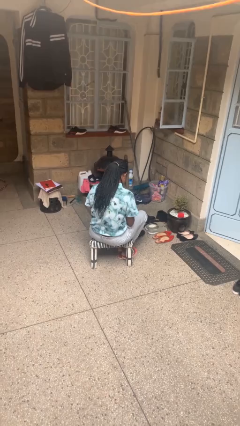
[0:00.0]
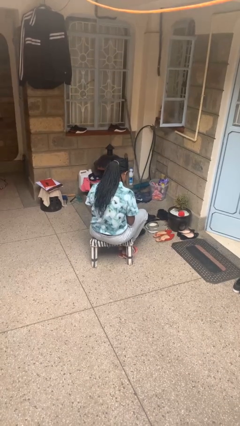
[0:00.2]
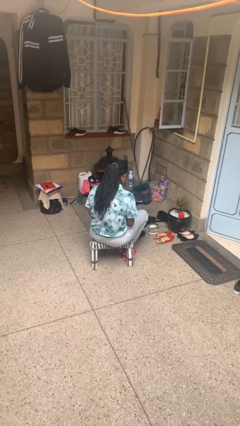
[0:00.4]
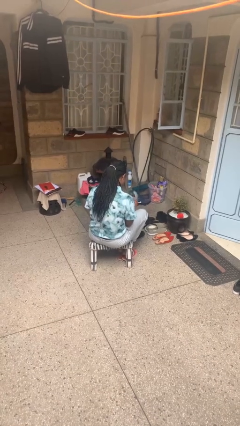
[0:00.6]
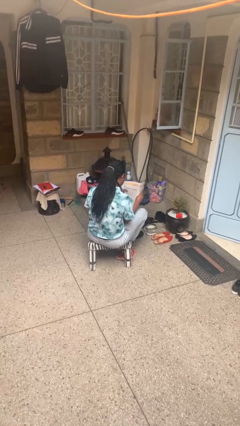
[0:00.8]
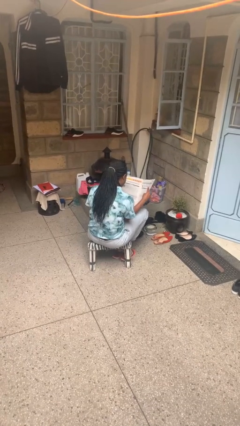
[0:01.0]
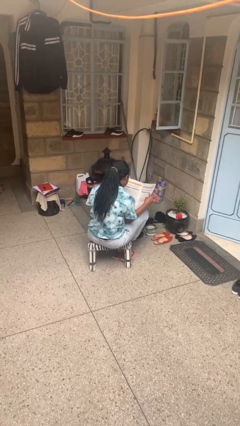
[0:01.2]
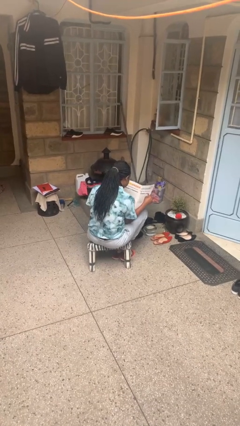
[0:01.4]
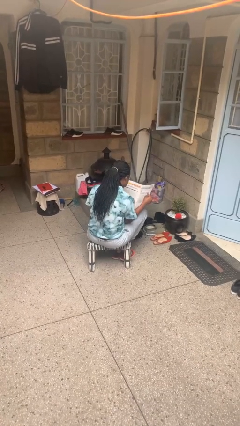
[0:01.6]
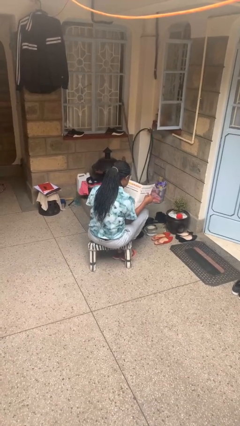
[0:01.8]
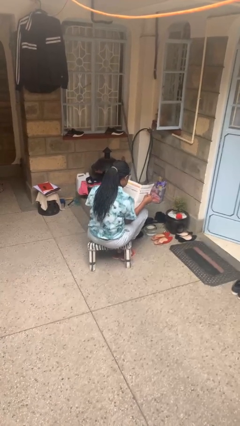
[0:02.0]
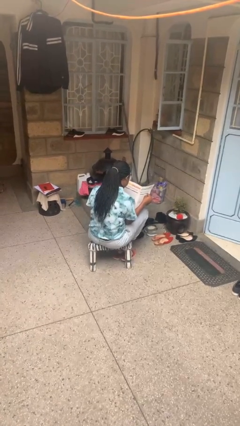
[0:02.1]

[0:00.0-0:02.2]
person reads newspaper

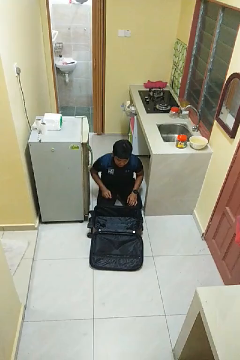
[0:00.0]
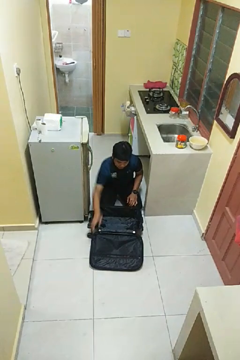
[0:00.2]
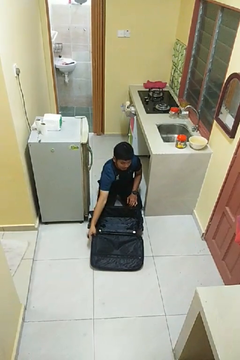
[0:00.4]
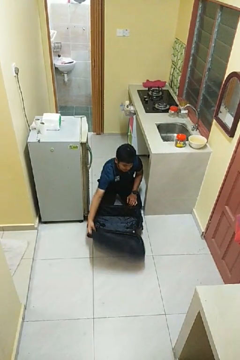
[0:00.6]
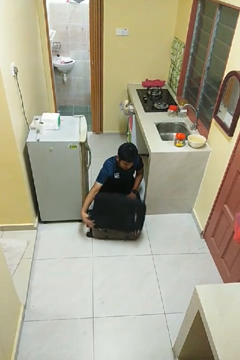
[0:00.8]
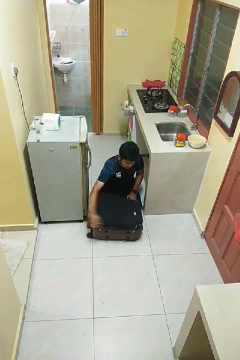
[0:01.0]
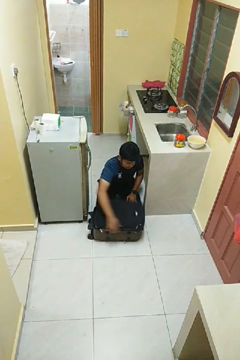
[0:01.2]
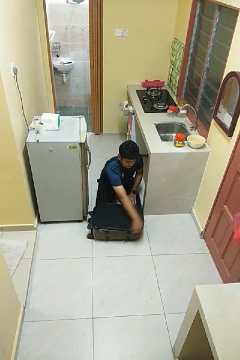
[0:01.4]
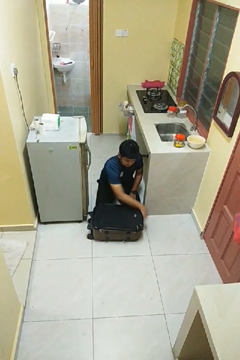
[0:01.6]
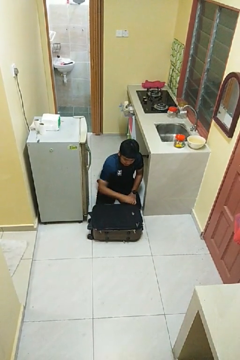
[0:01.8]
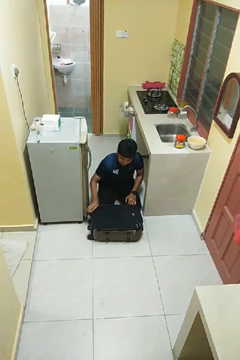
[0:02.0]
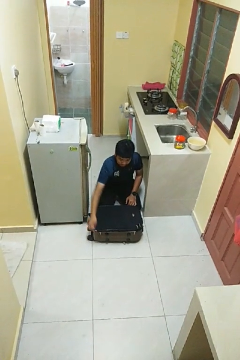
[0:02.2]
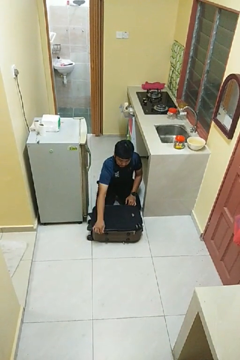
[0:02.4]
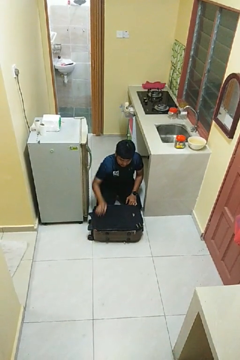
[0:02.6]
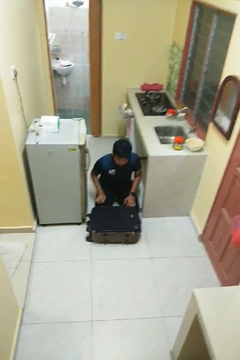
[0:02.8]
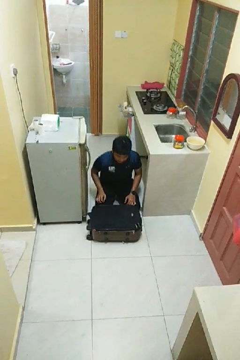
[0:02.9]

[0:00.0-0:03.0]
person closes suitcase

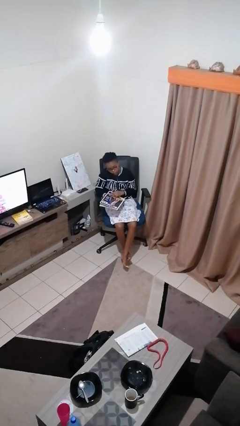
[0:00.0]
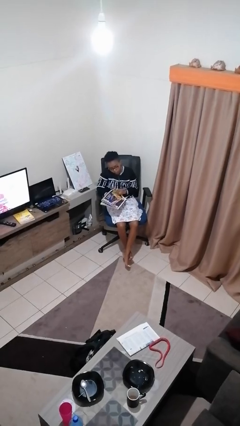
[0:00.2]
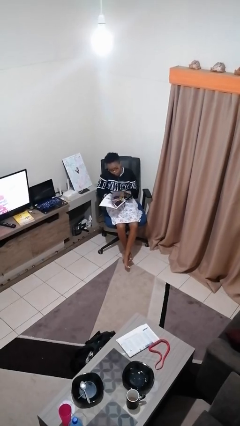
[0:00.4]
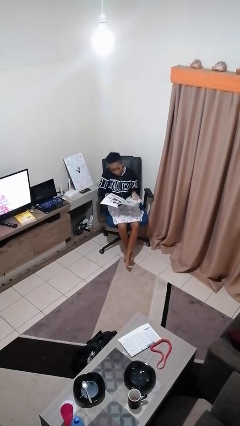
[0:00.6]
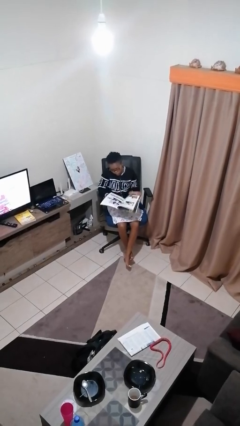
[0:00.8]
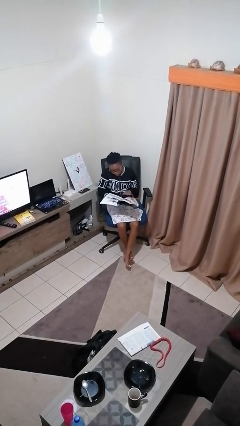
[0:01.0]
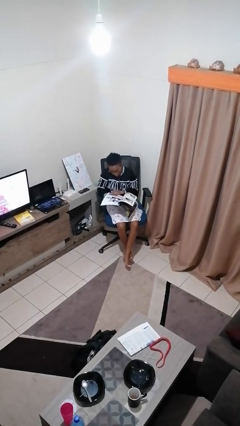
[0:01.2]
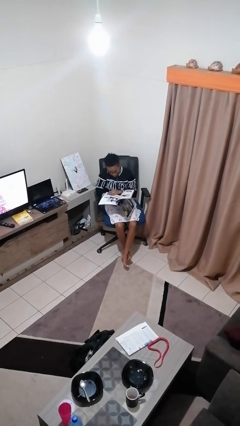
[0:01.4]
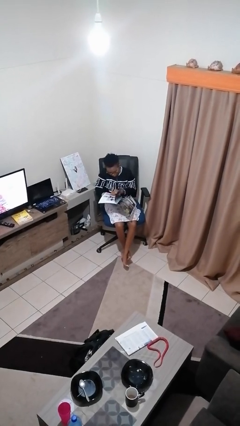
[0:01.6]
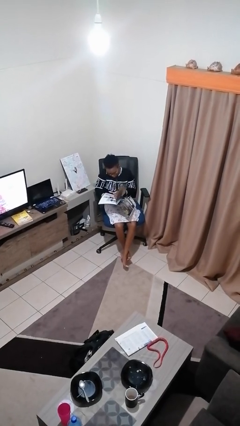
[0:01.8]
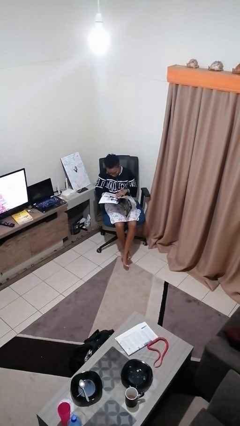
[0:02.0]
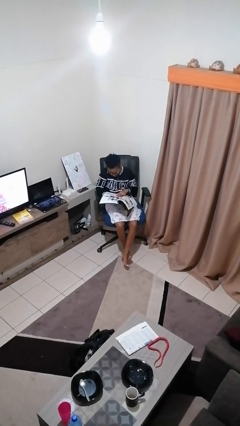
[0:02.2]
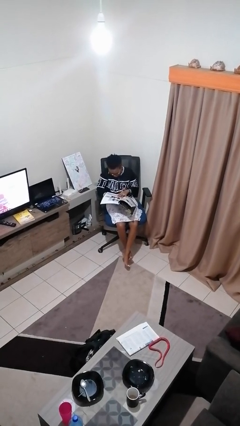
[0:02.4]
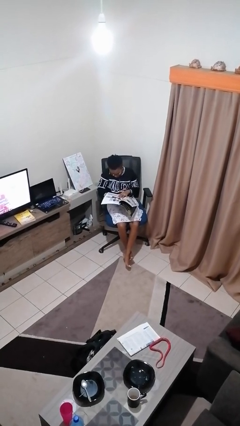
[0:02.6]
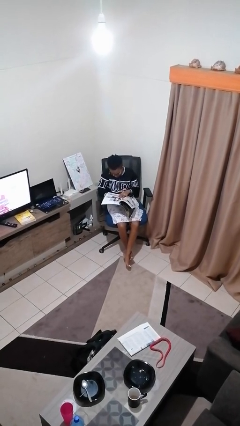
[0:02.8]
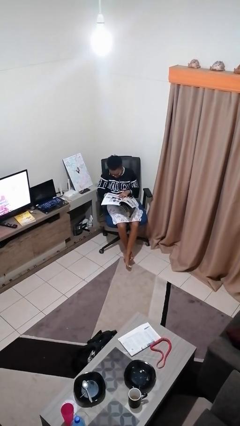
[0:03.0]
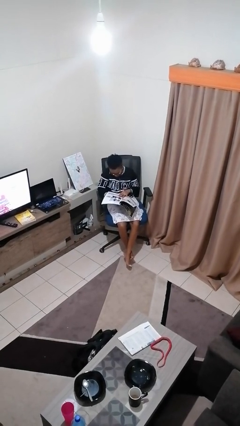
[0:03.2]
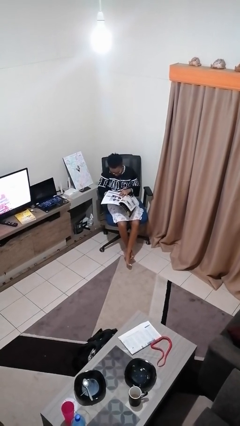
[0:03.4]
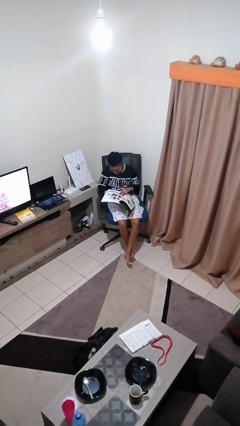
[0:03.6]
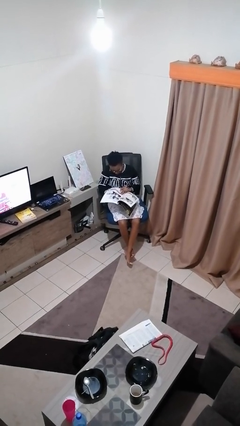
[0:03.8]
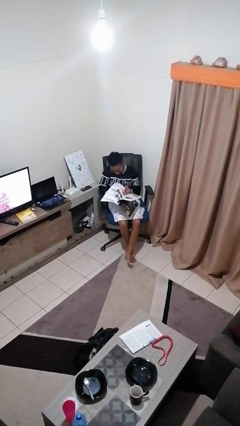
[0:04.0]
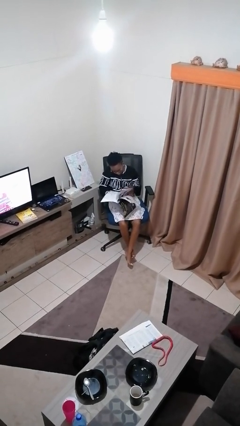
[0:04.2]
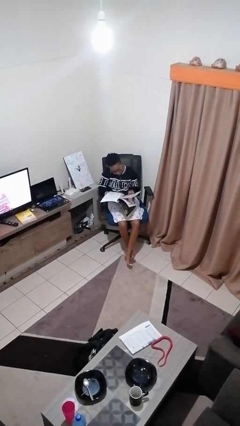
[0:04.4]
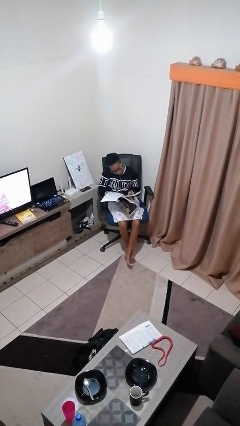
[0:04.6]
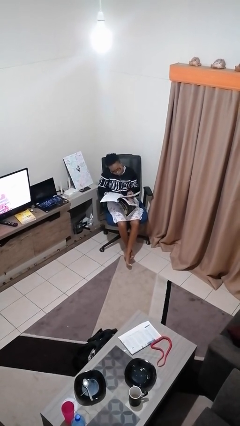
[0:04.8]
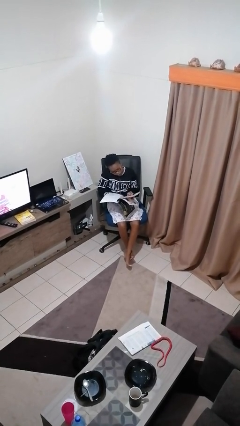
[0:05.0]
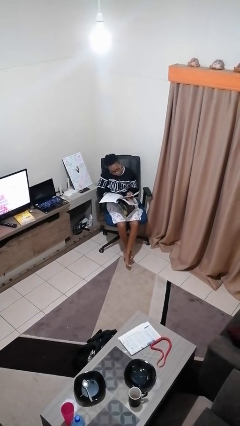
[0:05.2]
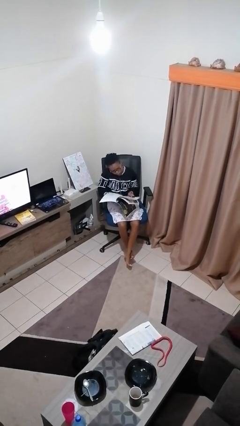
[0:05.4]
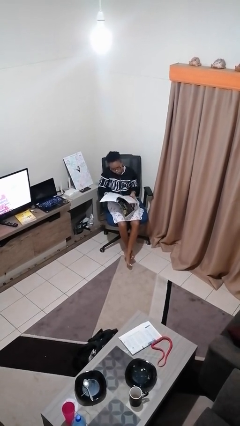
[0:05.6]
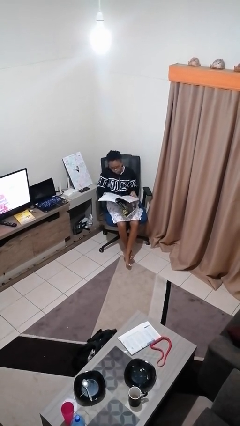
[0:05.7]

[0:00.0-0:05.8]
person reads magazine

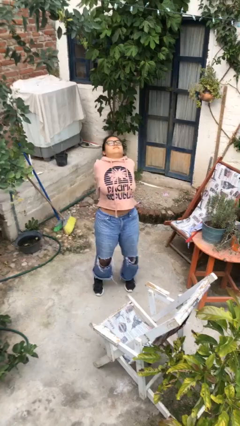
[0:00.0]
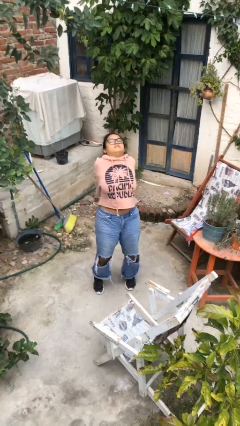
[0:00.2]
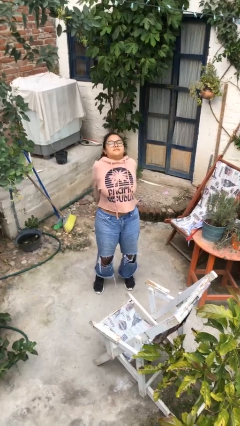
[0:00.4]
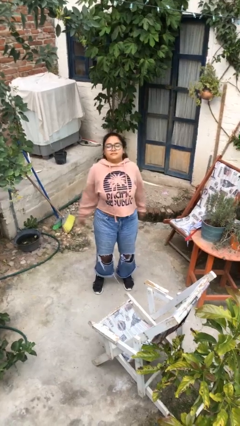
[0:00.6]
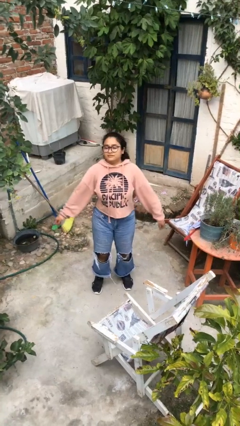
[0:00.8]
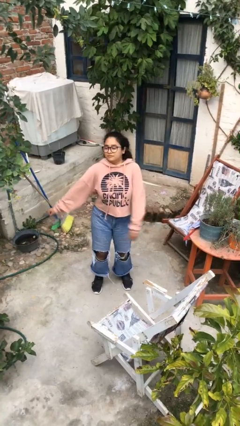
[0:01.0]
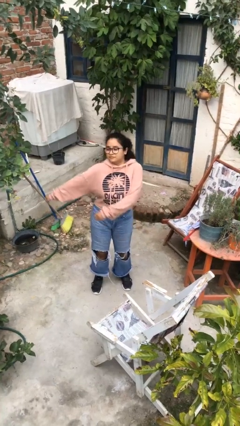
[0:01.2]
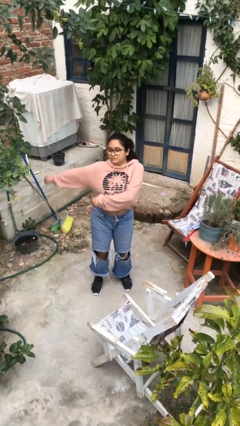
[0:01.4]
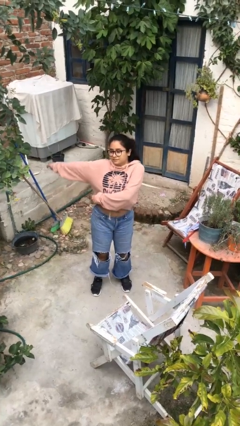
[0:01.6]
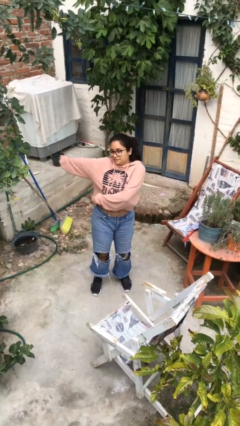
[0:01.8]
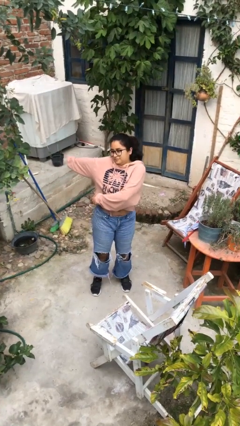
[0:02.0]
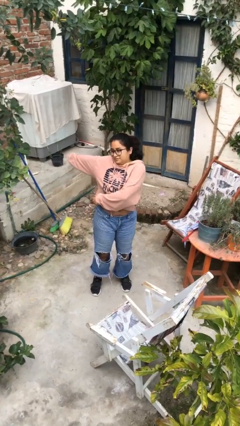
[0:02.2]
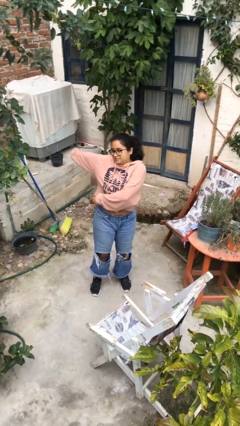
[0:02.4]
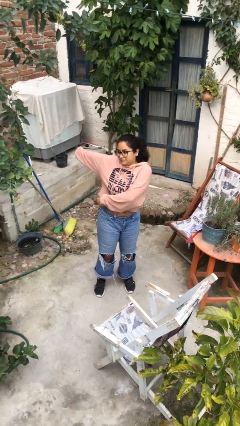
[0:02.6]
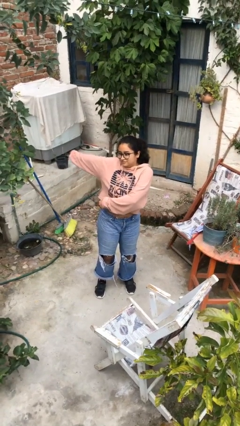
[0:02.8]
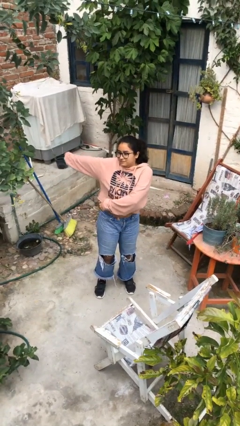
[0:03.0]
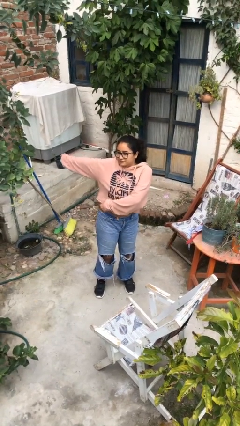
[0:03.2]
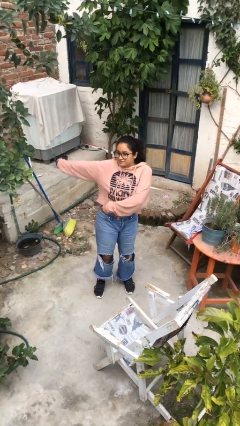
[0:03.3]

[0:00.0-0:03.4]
person stretches arms to side

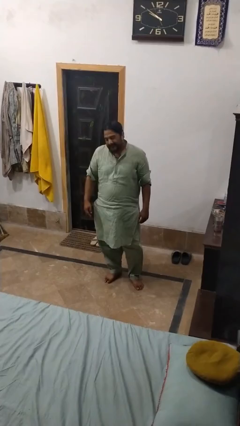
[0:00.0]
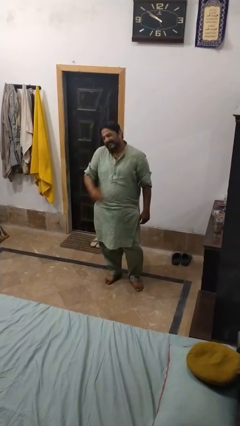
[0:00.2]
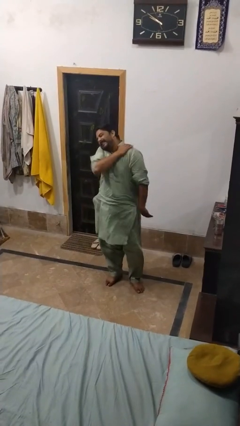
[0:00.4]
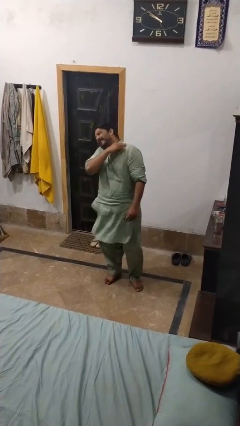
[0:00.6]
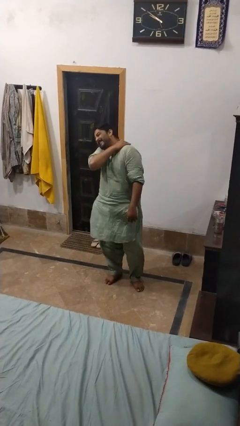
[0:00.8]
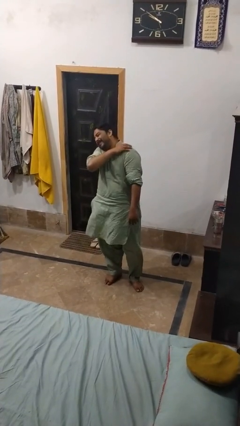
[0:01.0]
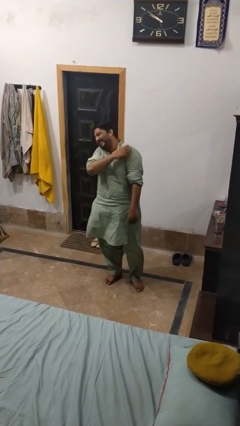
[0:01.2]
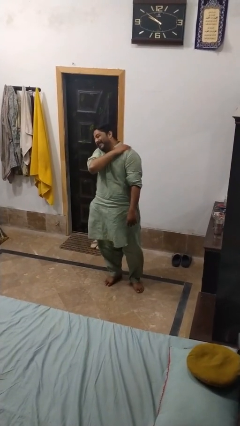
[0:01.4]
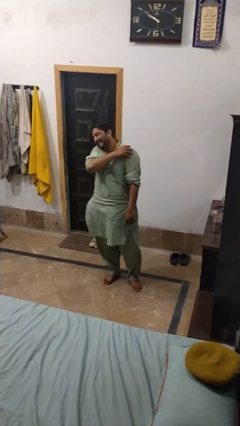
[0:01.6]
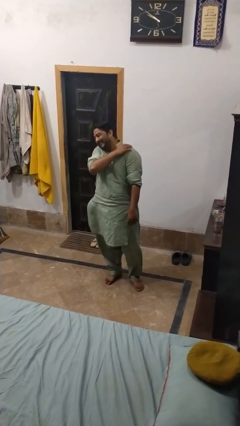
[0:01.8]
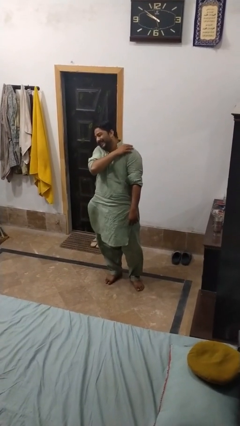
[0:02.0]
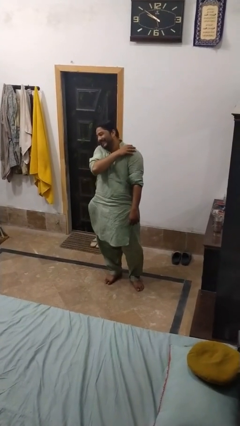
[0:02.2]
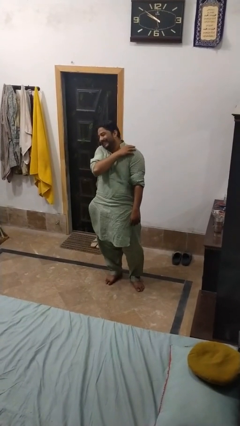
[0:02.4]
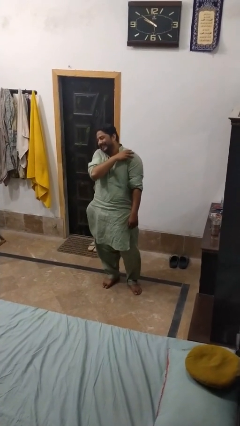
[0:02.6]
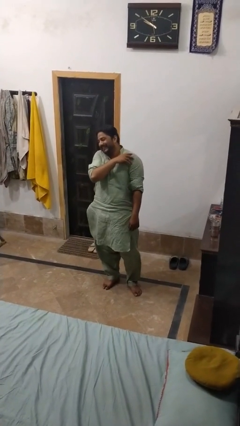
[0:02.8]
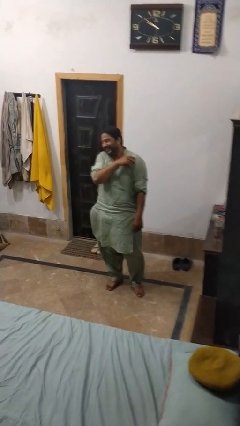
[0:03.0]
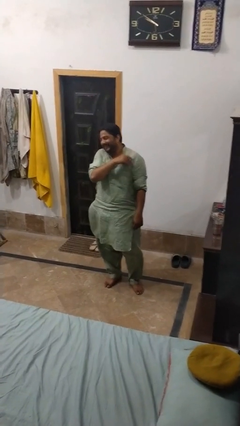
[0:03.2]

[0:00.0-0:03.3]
person swats bug

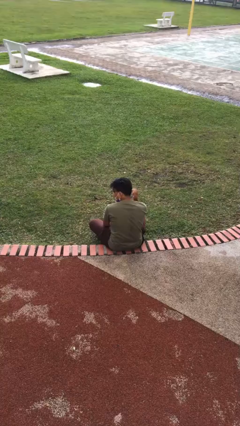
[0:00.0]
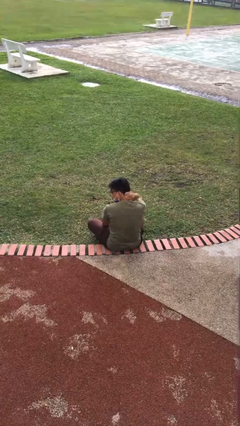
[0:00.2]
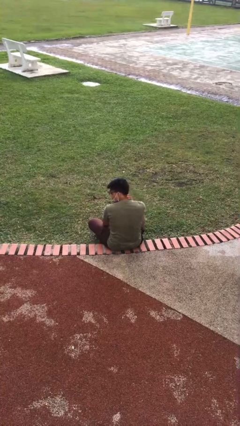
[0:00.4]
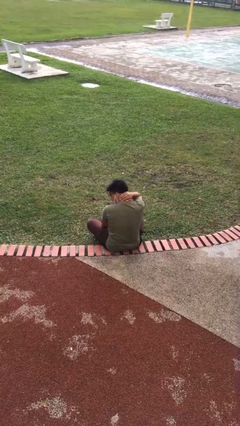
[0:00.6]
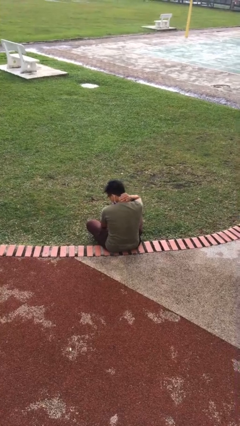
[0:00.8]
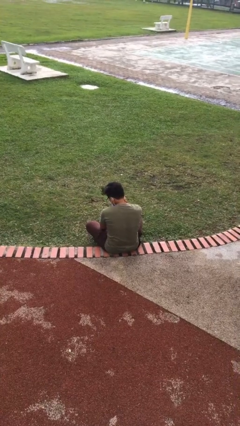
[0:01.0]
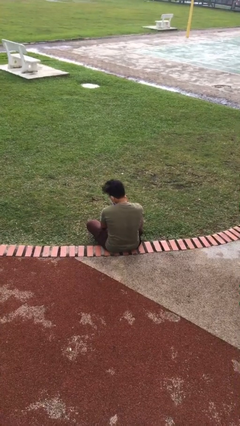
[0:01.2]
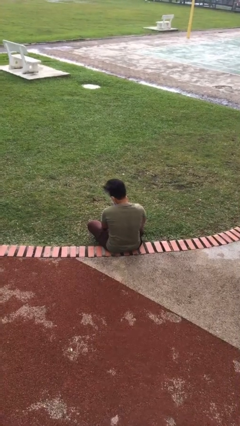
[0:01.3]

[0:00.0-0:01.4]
person rubs neck
